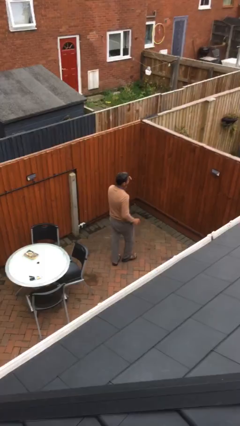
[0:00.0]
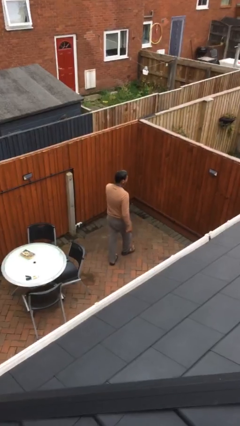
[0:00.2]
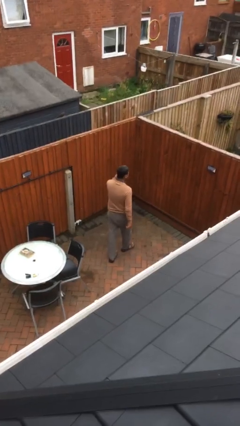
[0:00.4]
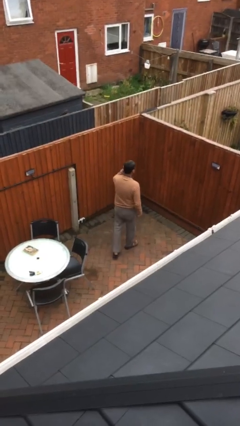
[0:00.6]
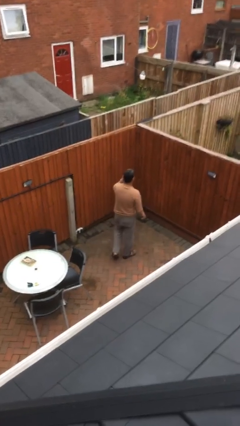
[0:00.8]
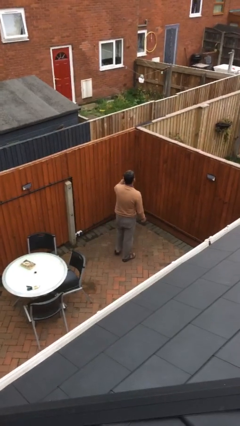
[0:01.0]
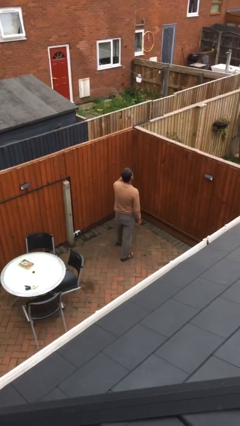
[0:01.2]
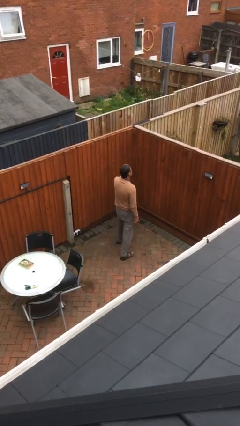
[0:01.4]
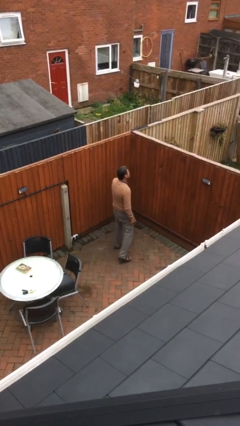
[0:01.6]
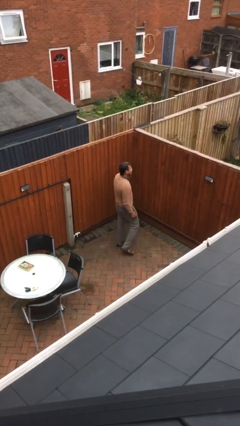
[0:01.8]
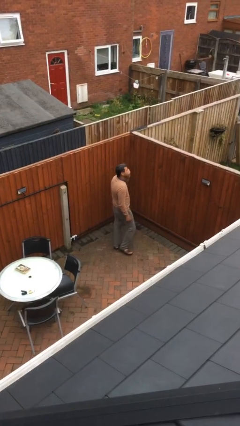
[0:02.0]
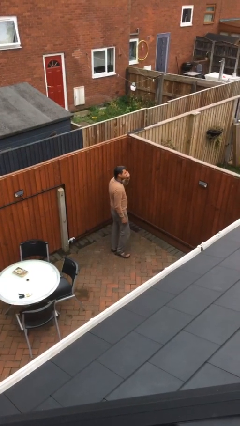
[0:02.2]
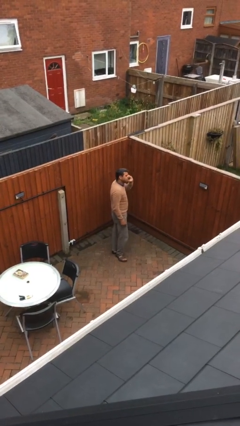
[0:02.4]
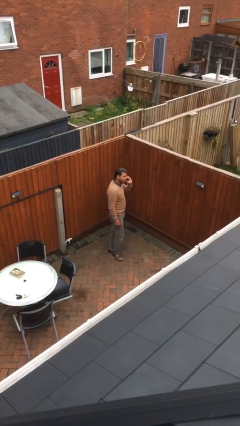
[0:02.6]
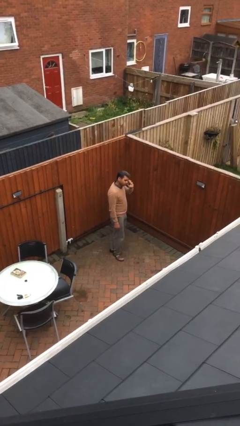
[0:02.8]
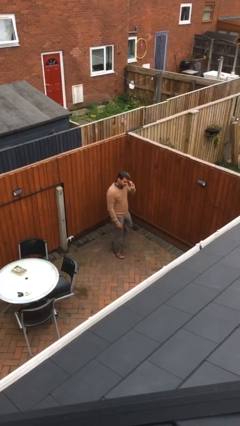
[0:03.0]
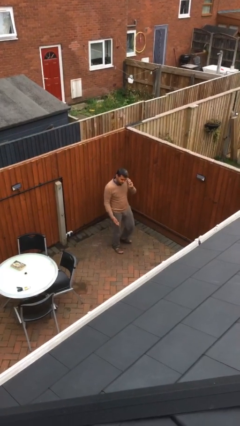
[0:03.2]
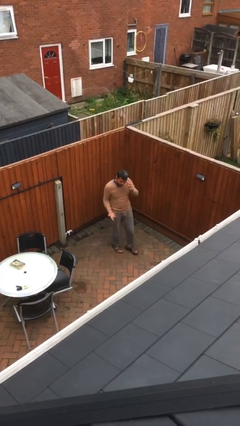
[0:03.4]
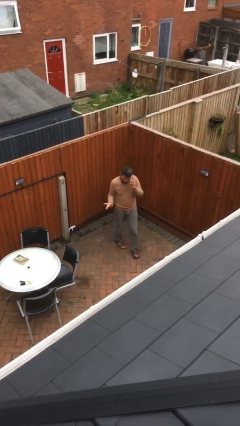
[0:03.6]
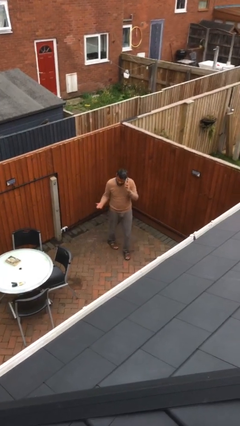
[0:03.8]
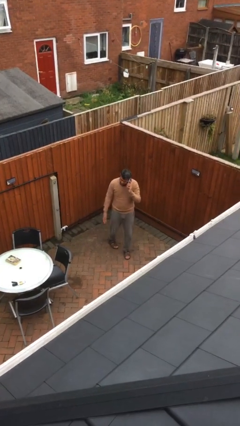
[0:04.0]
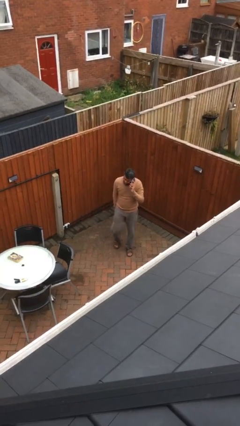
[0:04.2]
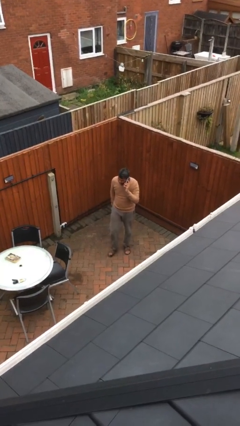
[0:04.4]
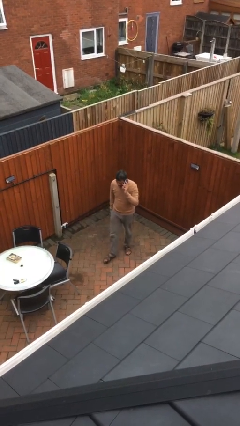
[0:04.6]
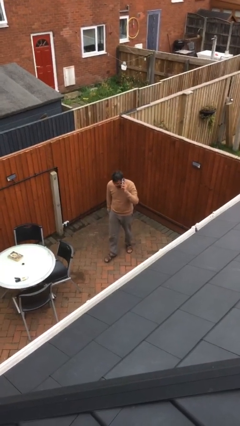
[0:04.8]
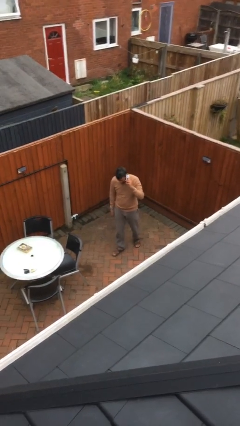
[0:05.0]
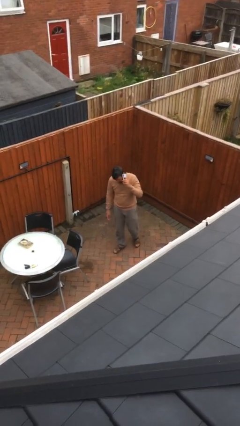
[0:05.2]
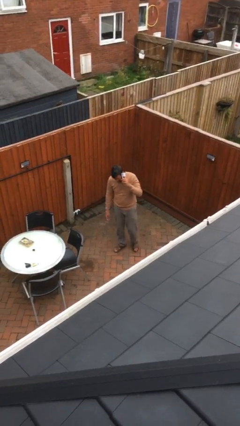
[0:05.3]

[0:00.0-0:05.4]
person talks on phone

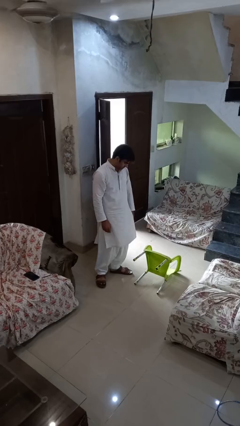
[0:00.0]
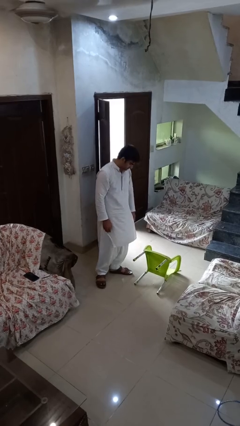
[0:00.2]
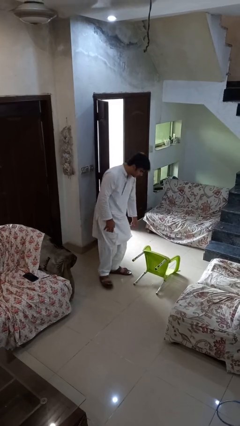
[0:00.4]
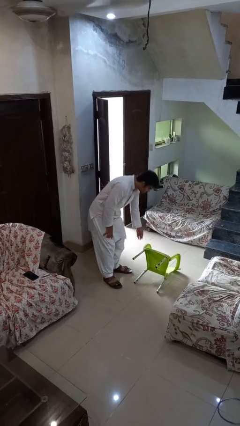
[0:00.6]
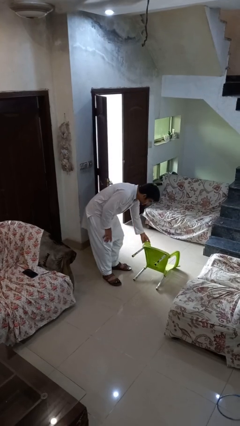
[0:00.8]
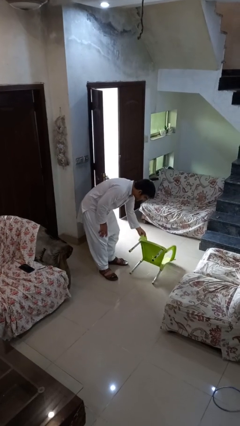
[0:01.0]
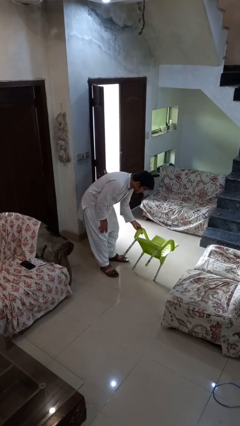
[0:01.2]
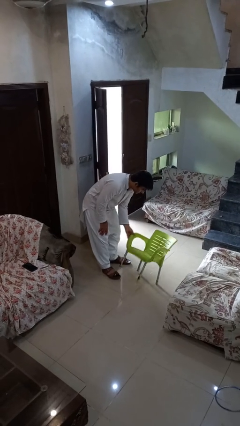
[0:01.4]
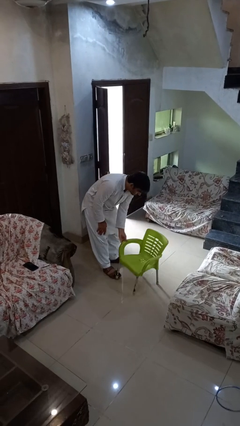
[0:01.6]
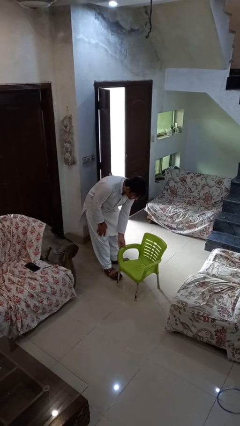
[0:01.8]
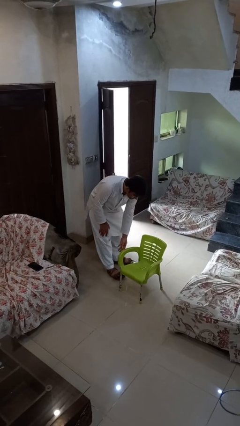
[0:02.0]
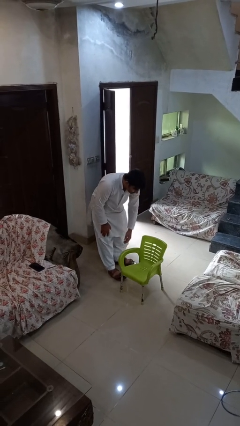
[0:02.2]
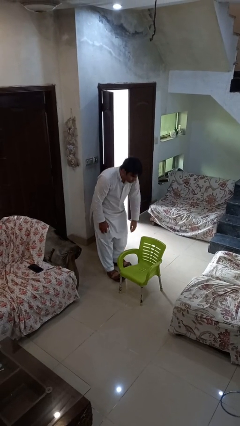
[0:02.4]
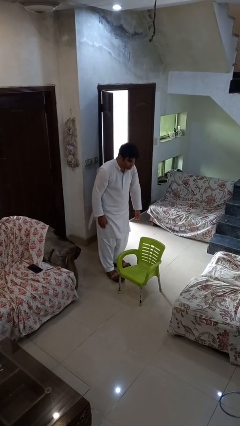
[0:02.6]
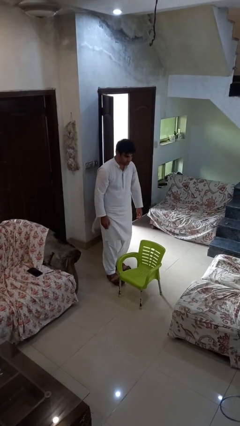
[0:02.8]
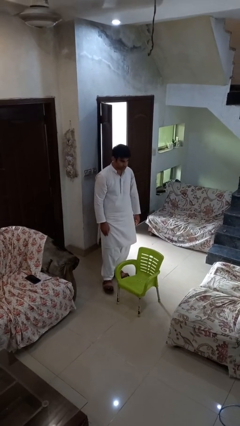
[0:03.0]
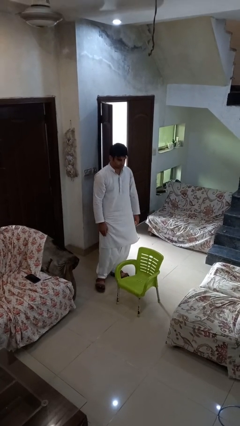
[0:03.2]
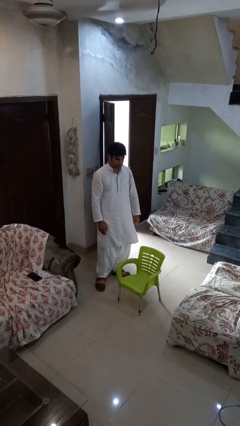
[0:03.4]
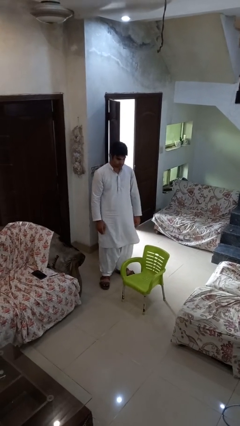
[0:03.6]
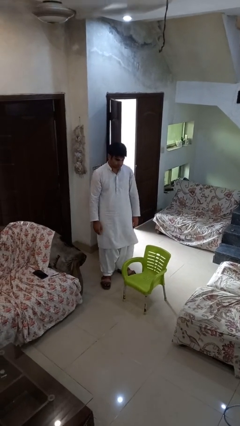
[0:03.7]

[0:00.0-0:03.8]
person sets upright furniture

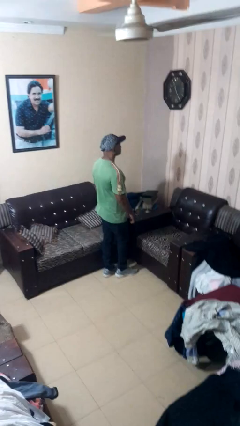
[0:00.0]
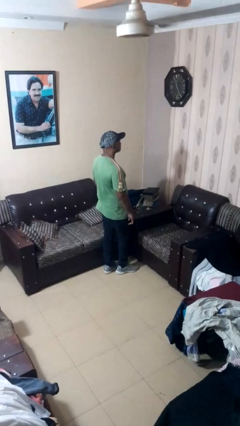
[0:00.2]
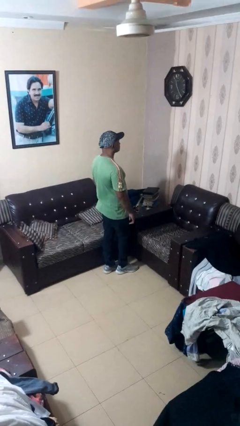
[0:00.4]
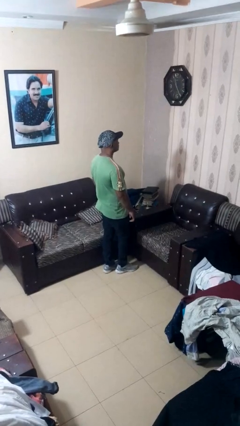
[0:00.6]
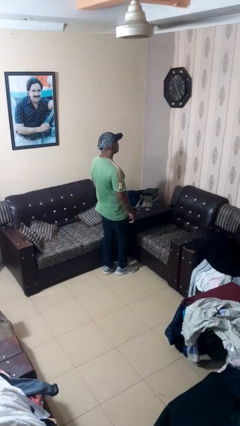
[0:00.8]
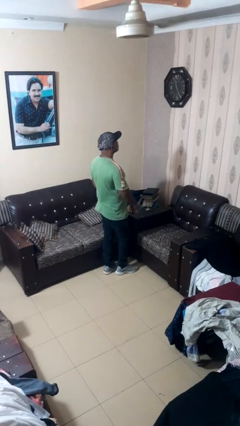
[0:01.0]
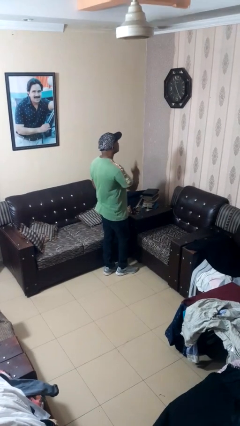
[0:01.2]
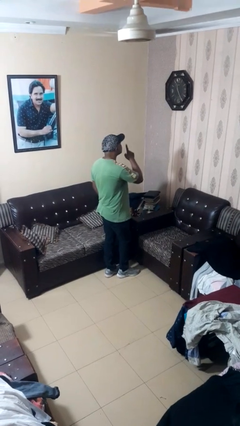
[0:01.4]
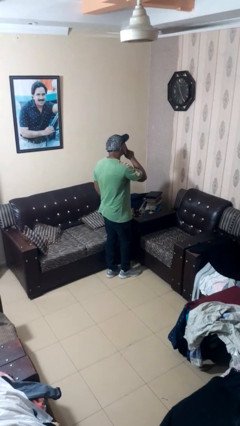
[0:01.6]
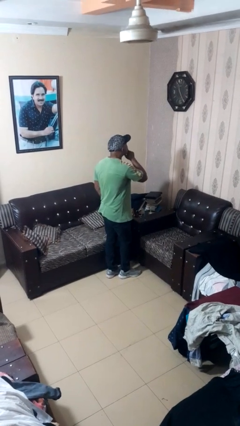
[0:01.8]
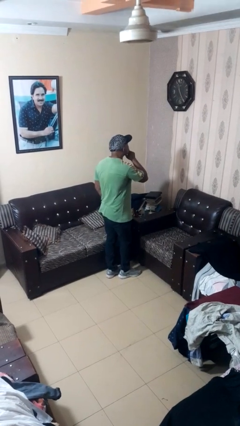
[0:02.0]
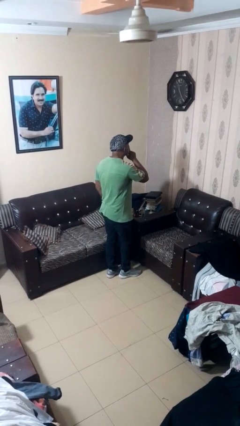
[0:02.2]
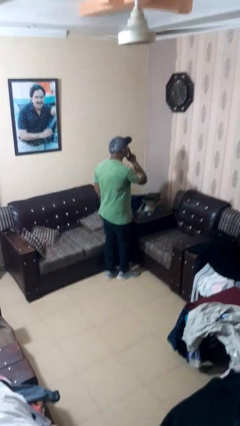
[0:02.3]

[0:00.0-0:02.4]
person gestures be quiet

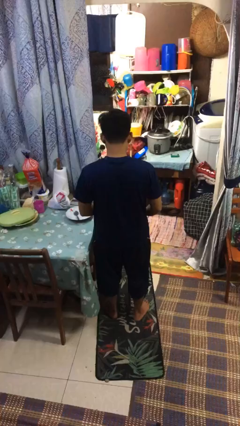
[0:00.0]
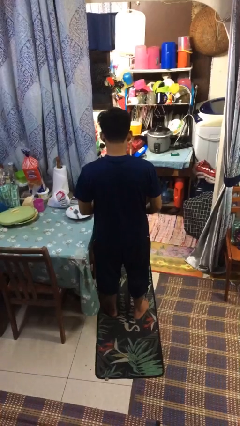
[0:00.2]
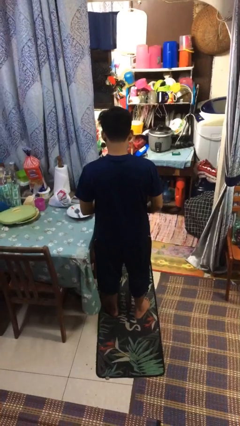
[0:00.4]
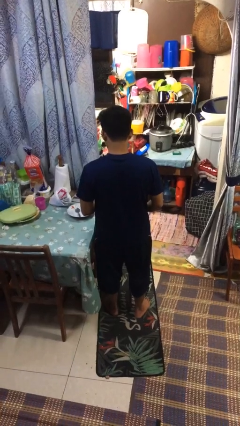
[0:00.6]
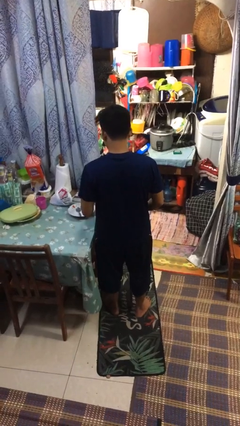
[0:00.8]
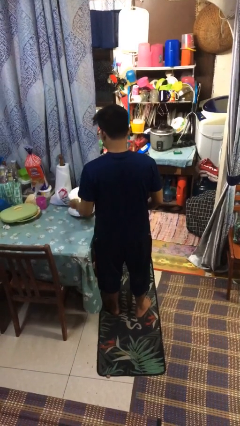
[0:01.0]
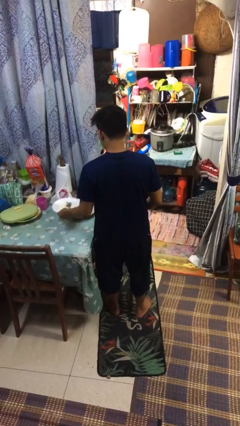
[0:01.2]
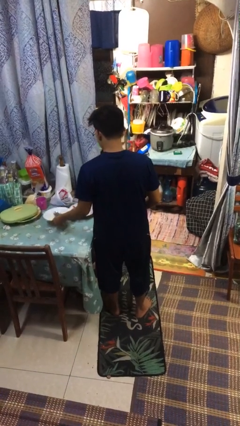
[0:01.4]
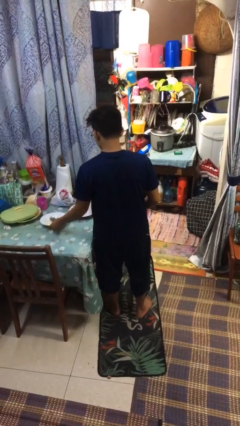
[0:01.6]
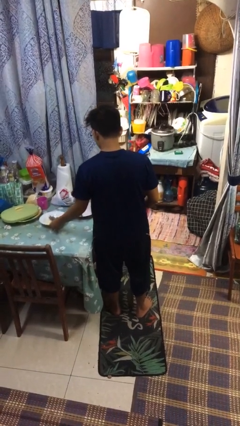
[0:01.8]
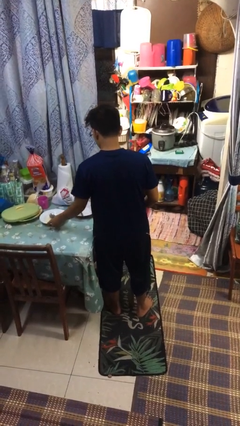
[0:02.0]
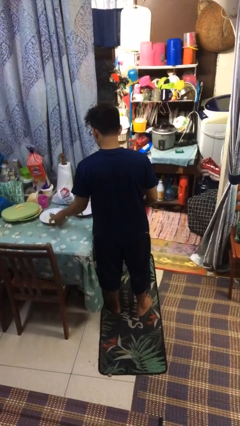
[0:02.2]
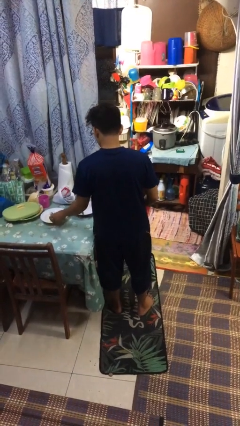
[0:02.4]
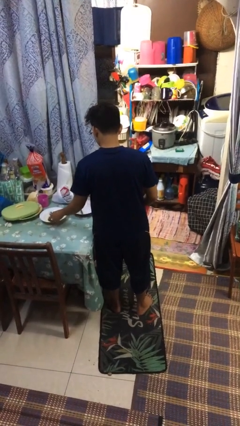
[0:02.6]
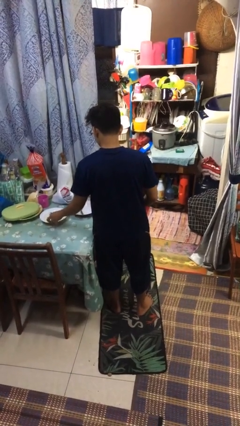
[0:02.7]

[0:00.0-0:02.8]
person sets table

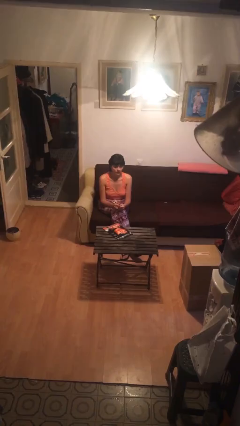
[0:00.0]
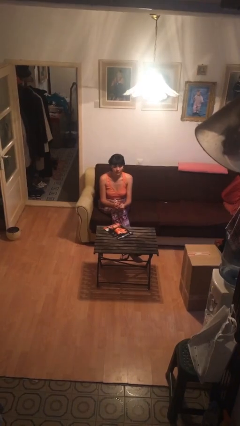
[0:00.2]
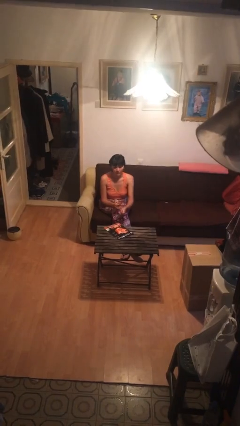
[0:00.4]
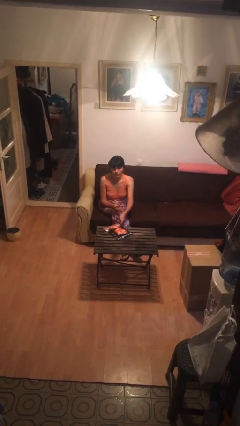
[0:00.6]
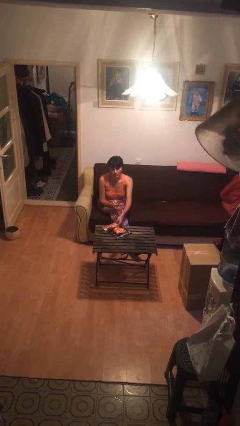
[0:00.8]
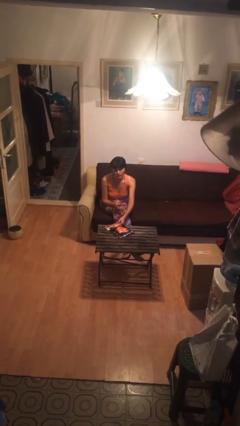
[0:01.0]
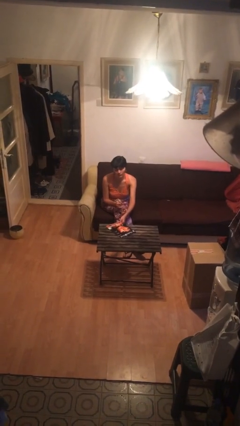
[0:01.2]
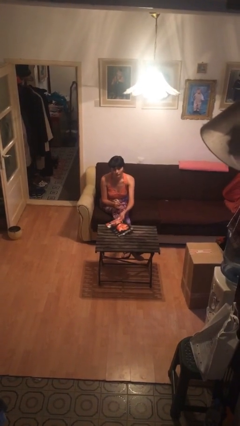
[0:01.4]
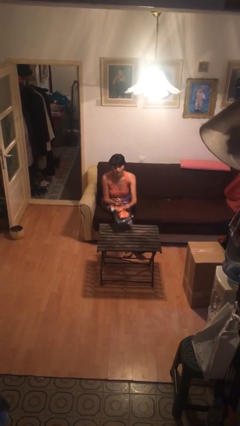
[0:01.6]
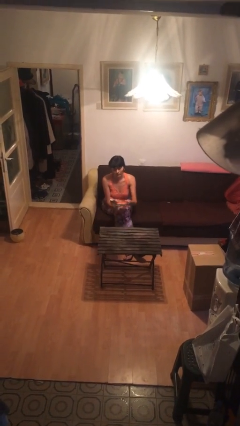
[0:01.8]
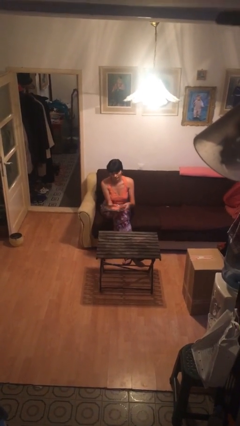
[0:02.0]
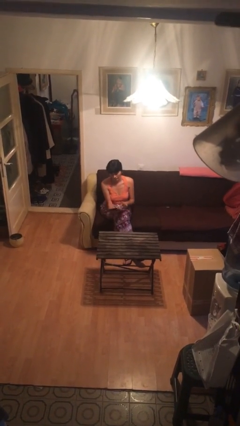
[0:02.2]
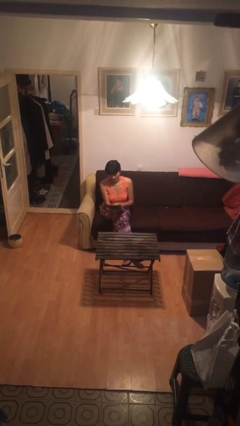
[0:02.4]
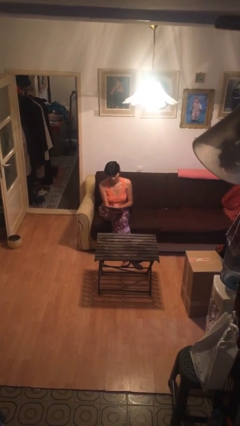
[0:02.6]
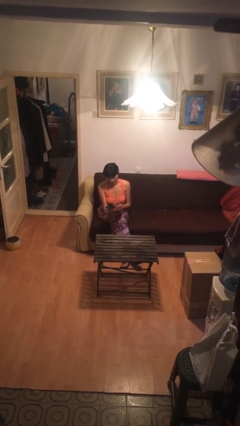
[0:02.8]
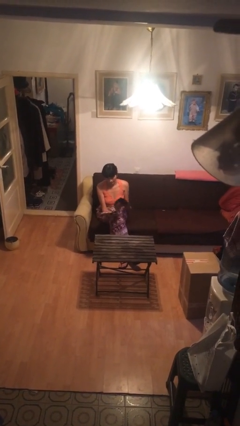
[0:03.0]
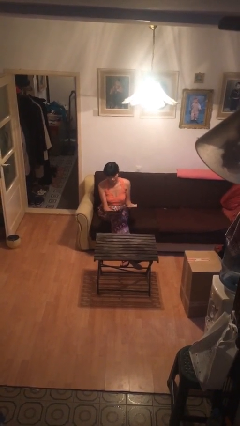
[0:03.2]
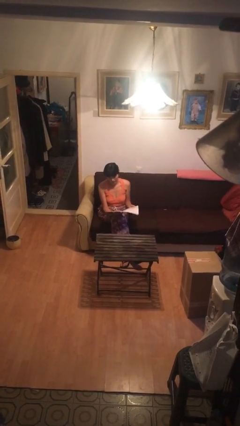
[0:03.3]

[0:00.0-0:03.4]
person picks up object from table
